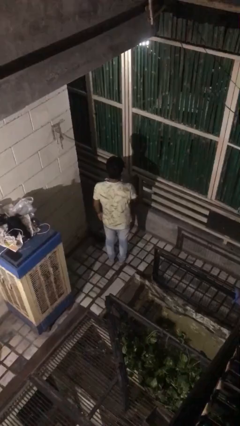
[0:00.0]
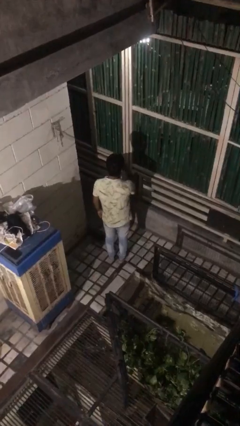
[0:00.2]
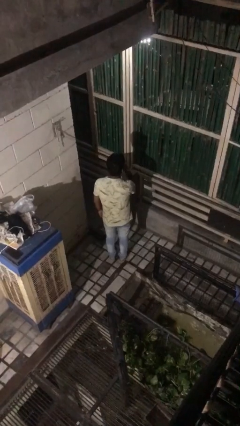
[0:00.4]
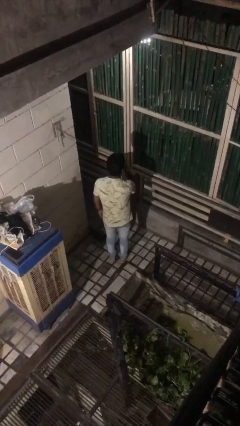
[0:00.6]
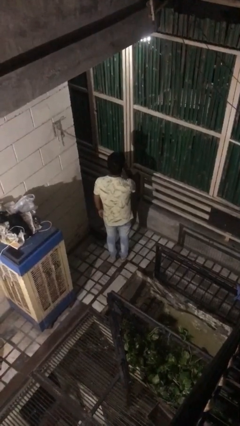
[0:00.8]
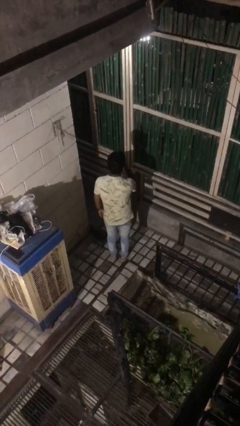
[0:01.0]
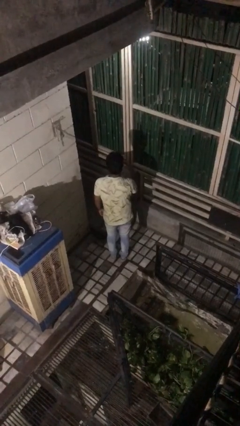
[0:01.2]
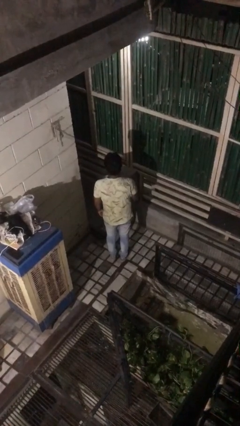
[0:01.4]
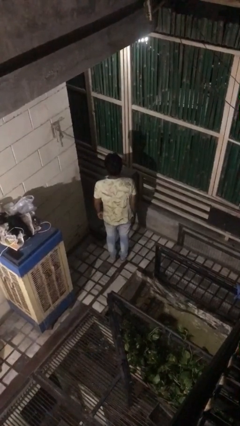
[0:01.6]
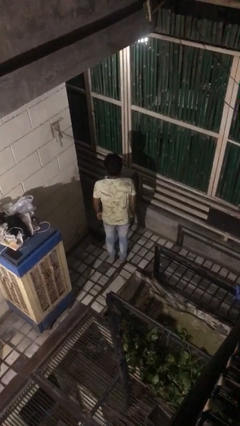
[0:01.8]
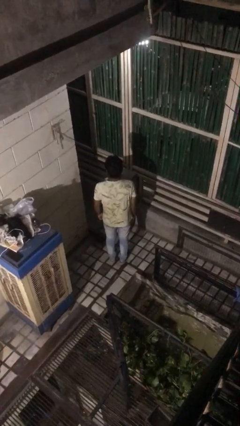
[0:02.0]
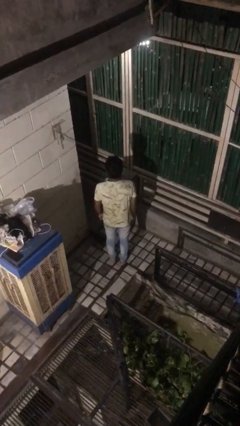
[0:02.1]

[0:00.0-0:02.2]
person gestures be quiet

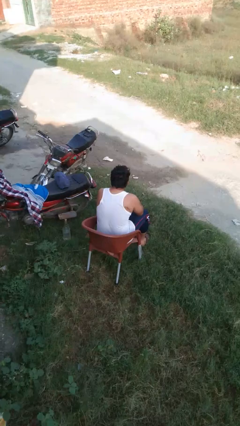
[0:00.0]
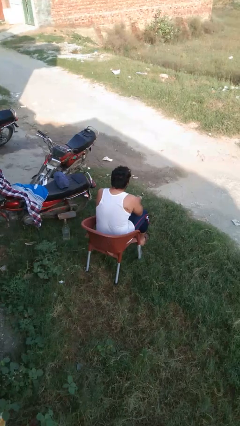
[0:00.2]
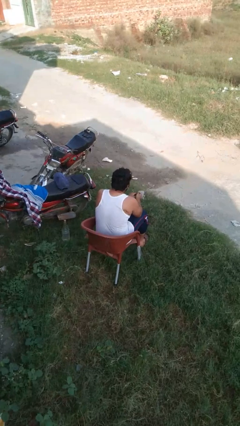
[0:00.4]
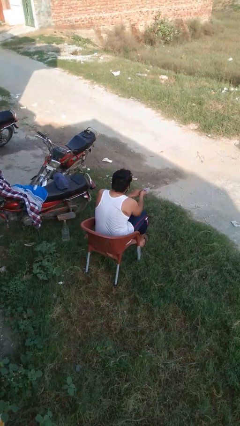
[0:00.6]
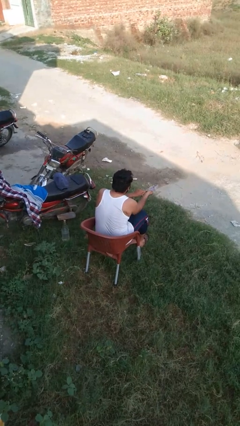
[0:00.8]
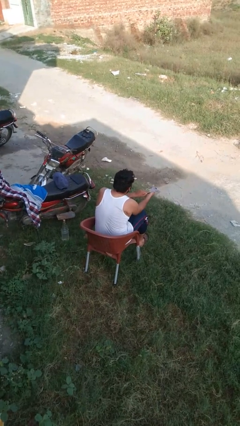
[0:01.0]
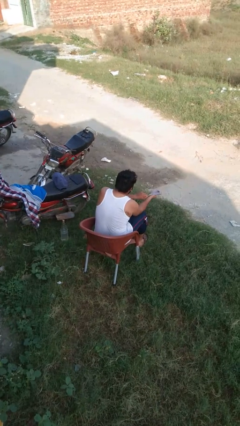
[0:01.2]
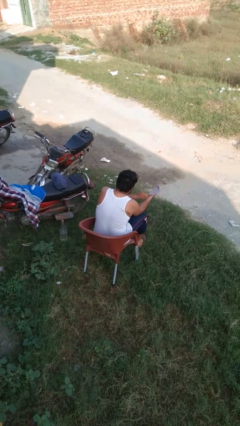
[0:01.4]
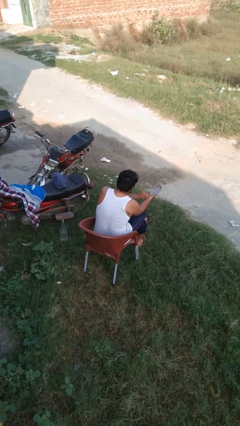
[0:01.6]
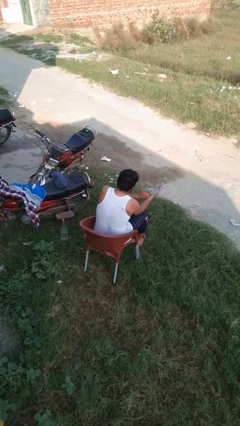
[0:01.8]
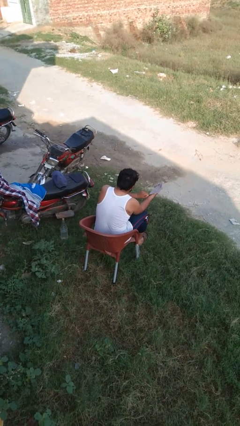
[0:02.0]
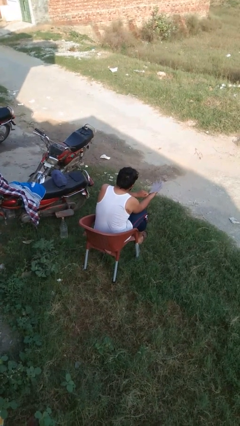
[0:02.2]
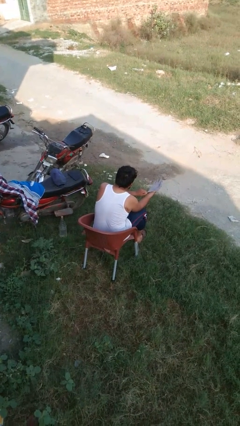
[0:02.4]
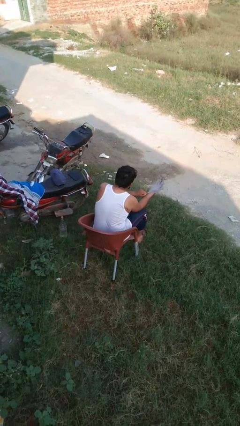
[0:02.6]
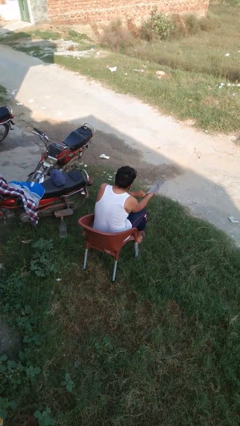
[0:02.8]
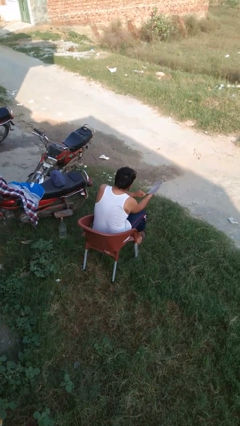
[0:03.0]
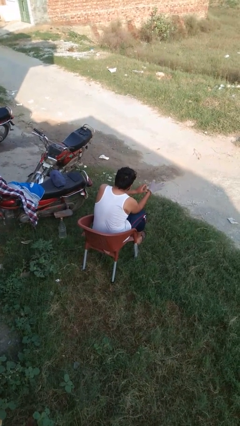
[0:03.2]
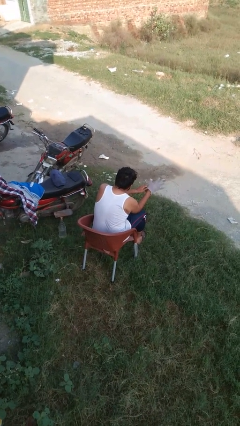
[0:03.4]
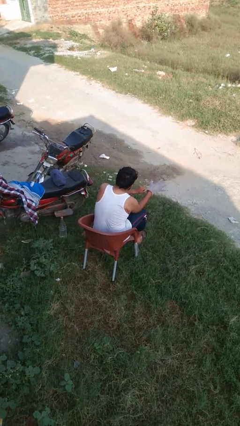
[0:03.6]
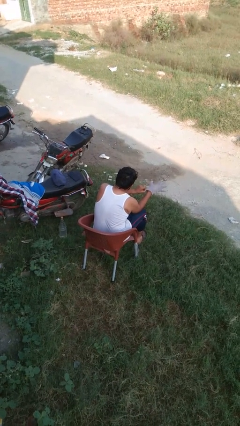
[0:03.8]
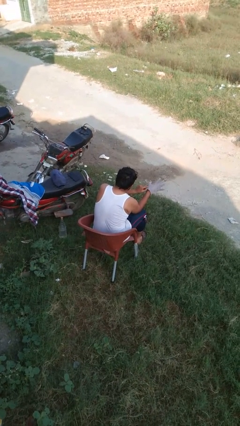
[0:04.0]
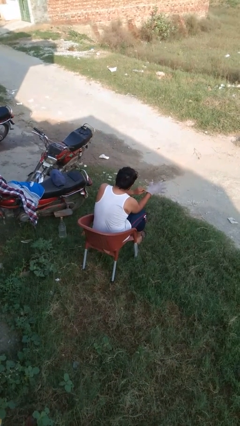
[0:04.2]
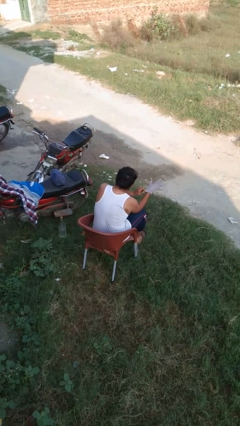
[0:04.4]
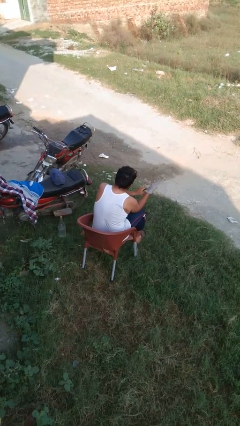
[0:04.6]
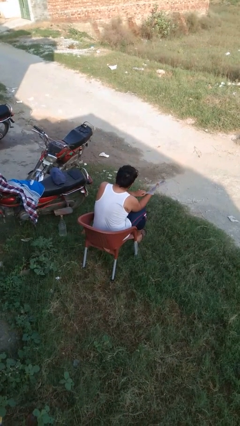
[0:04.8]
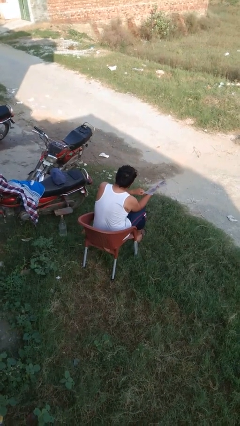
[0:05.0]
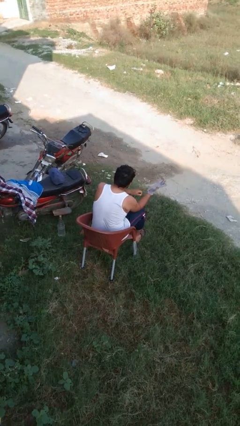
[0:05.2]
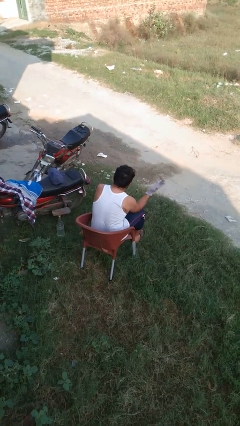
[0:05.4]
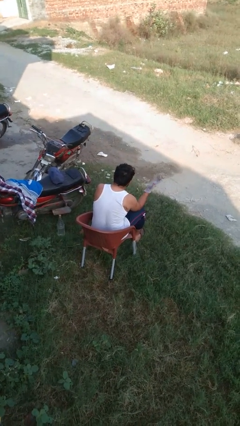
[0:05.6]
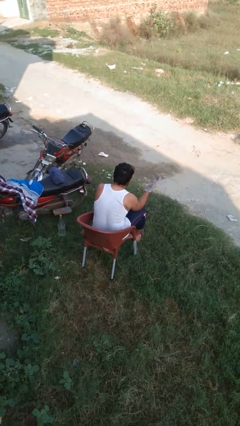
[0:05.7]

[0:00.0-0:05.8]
person puts on gloves

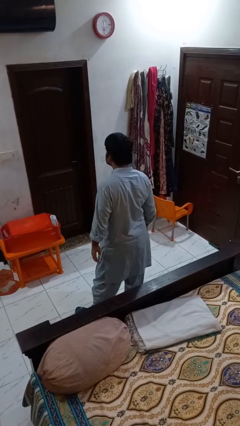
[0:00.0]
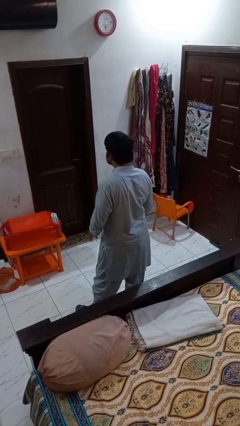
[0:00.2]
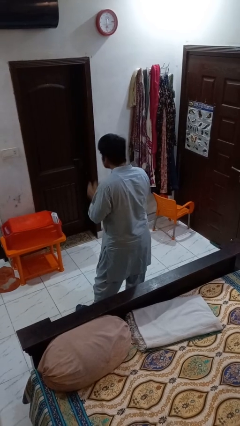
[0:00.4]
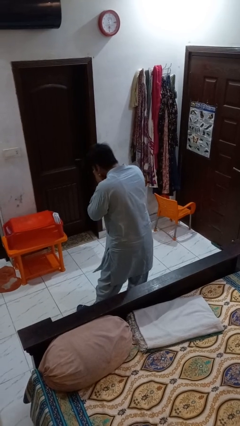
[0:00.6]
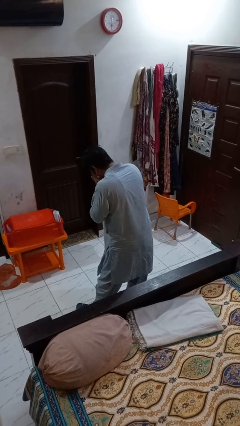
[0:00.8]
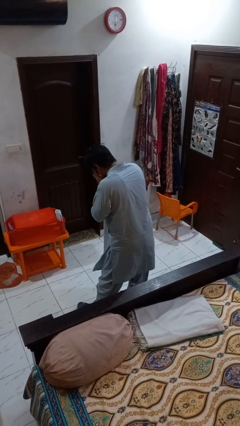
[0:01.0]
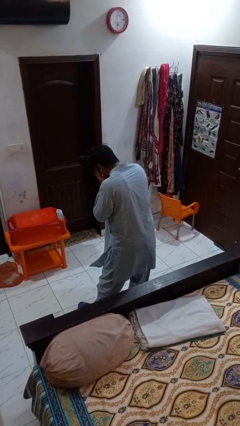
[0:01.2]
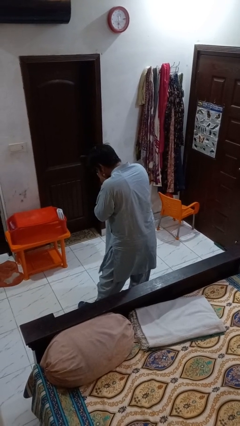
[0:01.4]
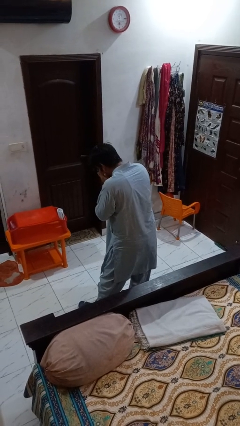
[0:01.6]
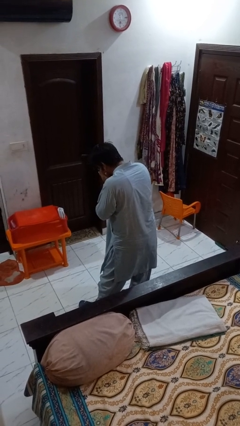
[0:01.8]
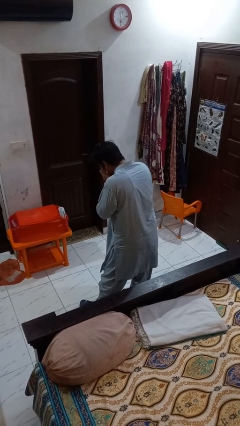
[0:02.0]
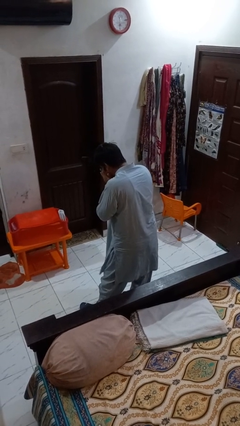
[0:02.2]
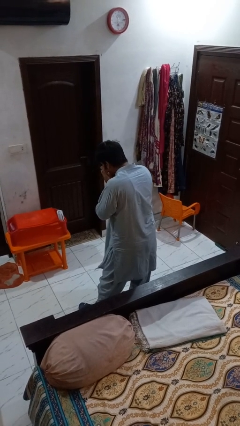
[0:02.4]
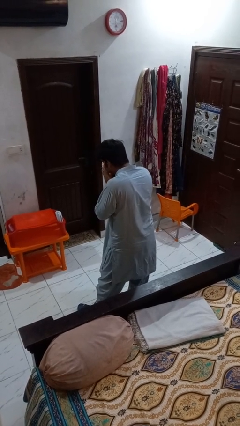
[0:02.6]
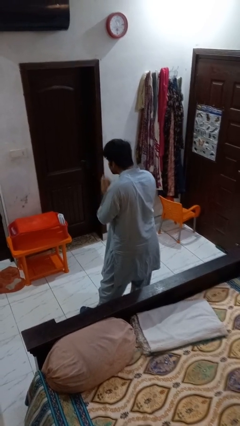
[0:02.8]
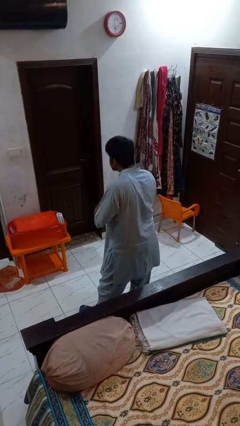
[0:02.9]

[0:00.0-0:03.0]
person sneezes into hand

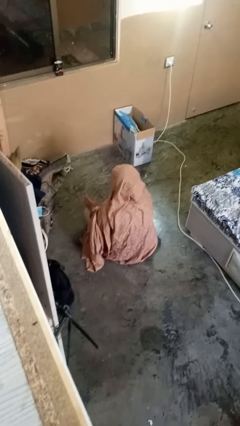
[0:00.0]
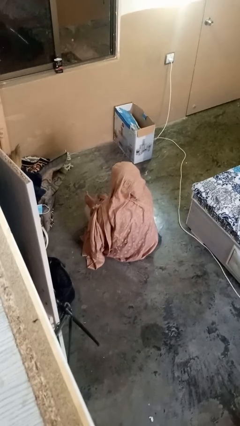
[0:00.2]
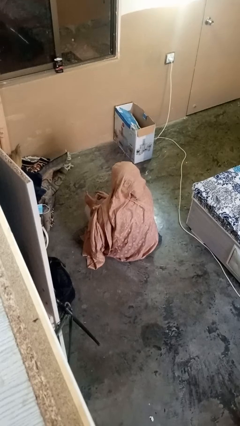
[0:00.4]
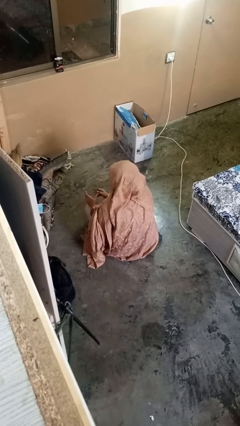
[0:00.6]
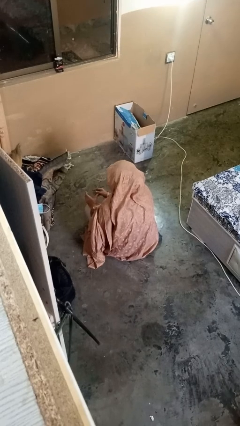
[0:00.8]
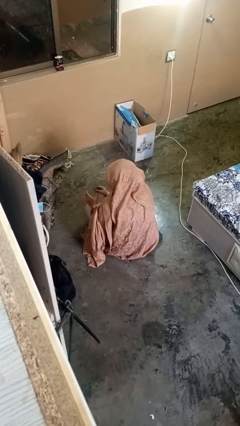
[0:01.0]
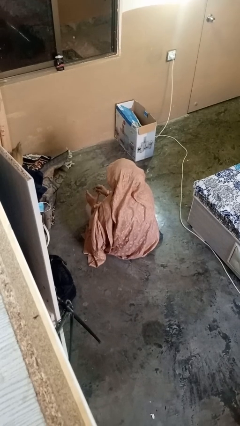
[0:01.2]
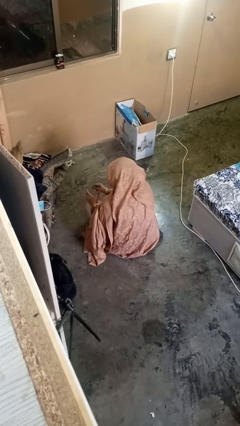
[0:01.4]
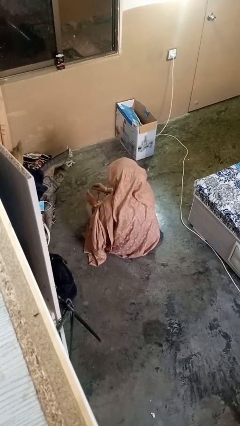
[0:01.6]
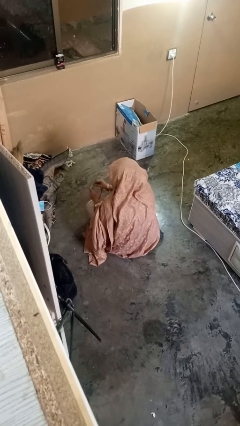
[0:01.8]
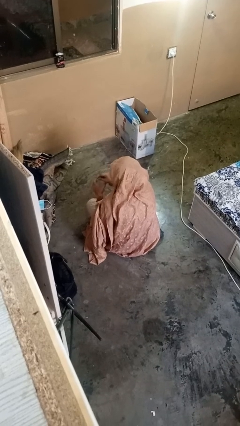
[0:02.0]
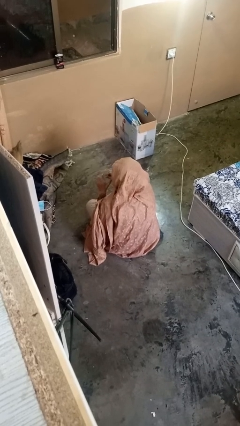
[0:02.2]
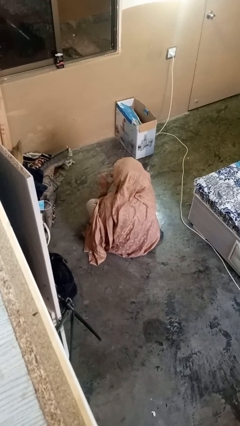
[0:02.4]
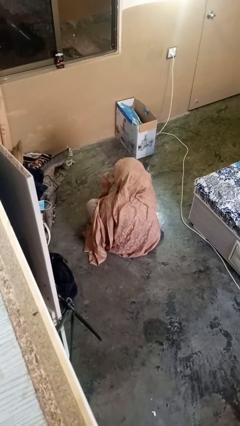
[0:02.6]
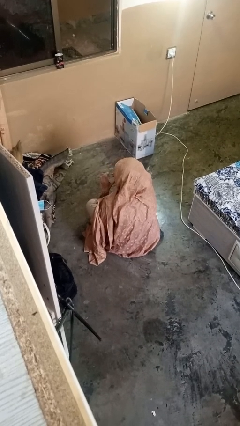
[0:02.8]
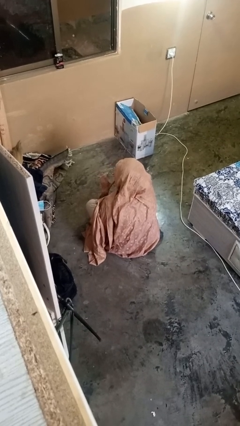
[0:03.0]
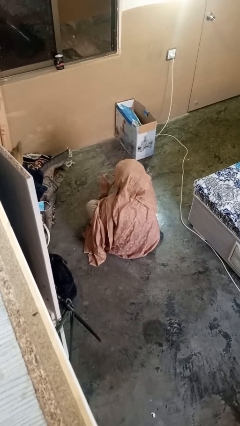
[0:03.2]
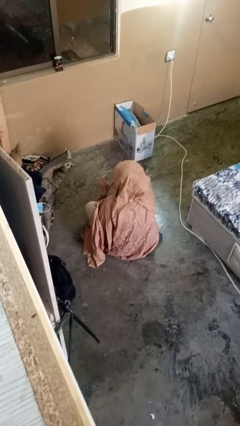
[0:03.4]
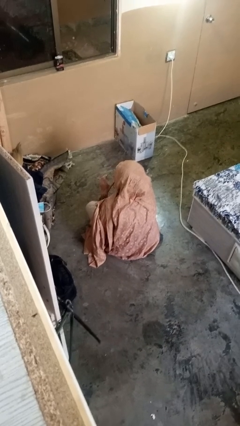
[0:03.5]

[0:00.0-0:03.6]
person drinks from straw

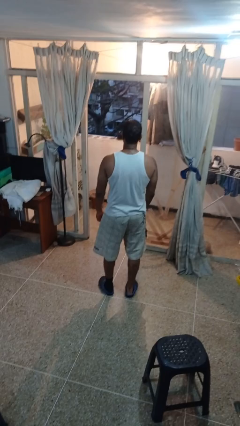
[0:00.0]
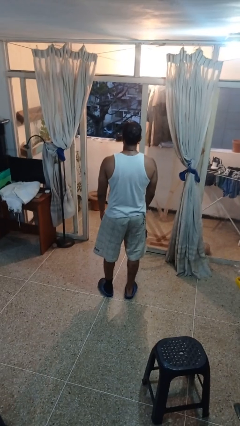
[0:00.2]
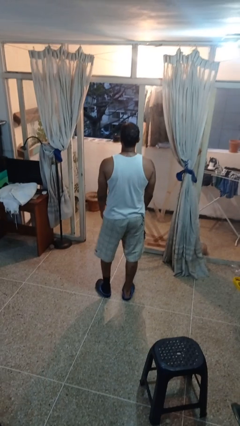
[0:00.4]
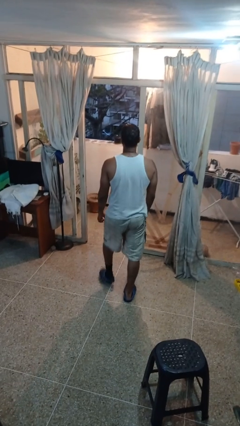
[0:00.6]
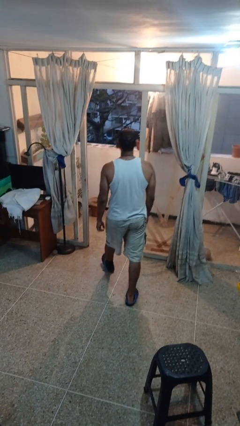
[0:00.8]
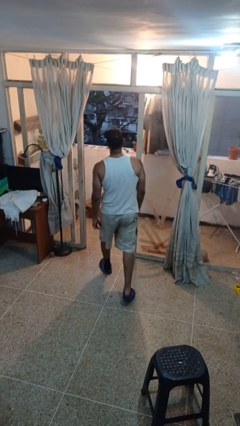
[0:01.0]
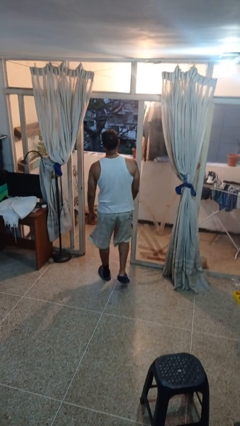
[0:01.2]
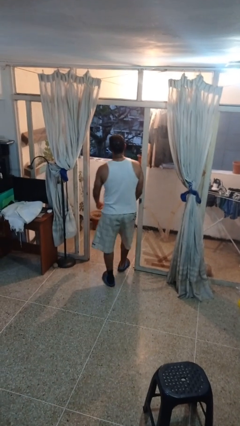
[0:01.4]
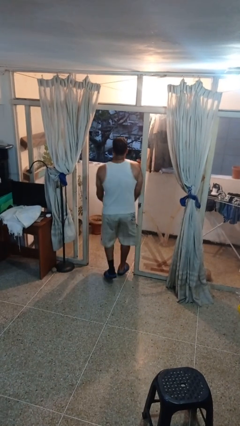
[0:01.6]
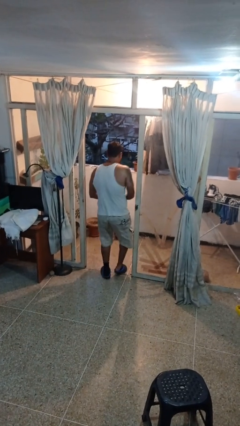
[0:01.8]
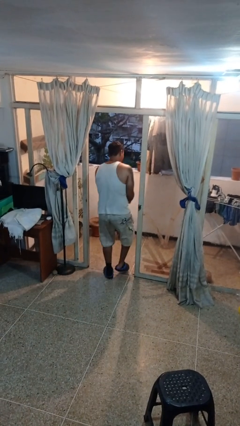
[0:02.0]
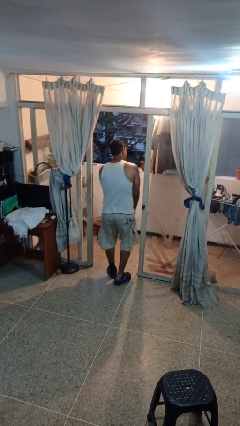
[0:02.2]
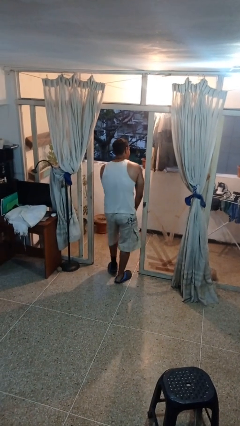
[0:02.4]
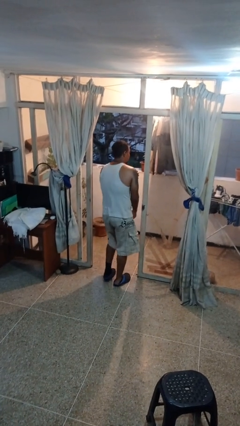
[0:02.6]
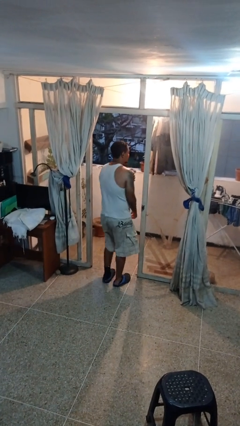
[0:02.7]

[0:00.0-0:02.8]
person bumps into wall

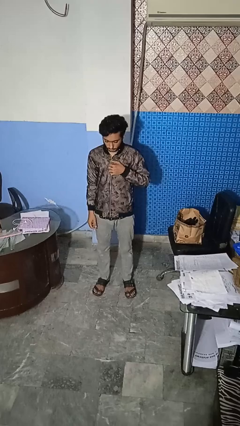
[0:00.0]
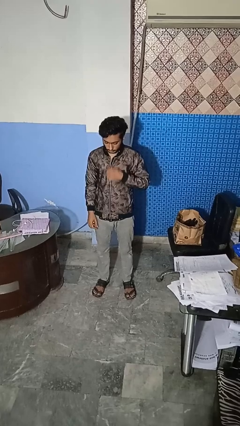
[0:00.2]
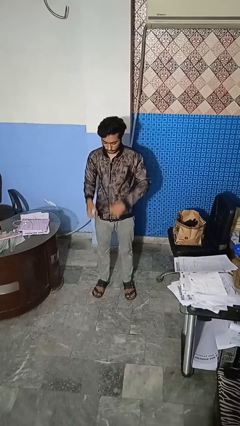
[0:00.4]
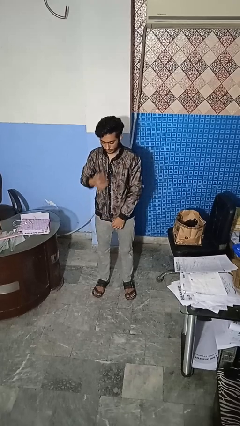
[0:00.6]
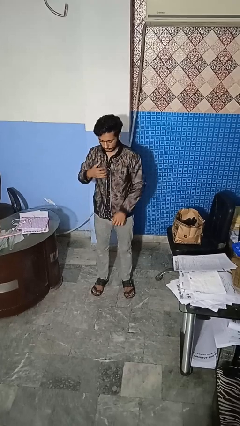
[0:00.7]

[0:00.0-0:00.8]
person unzips jacket
